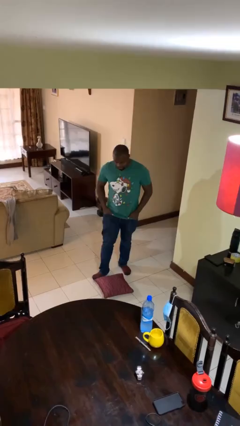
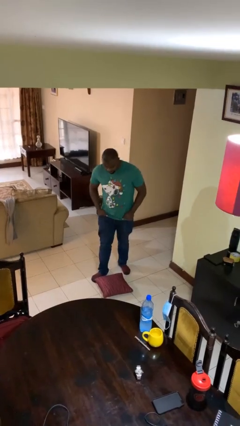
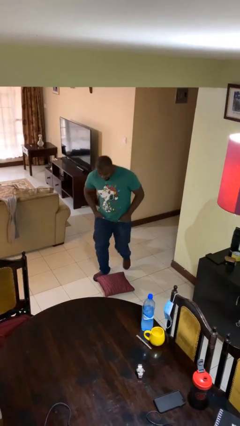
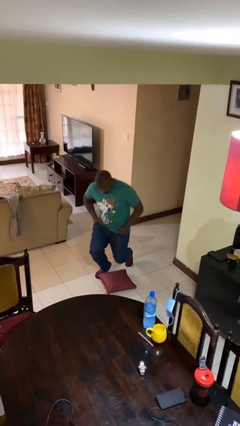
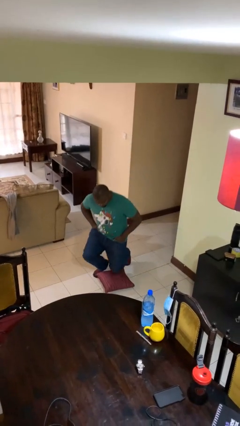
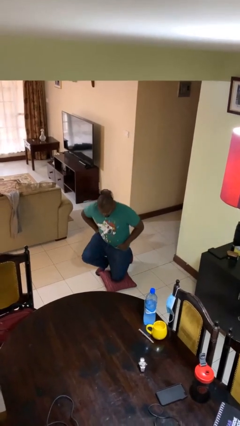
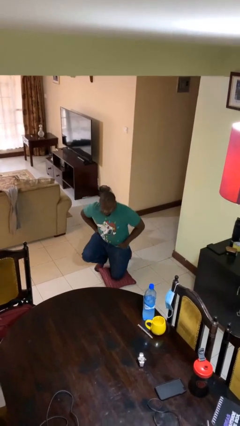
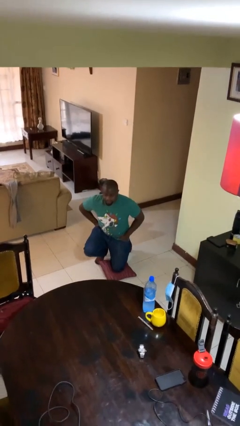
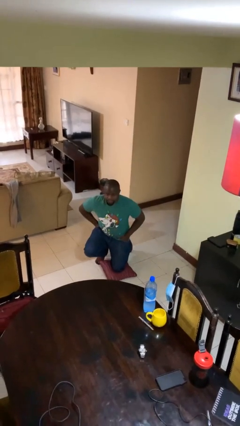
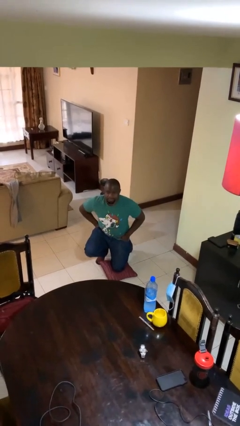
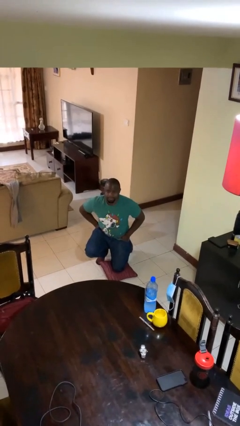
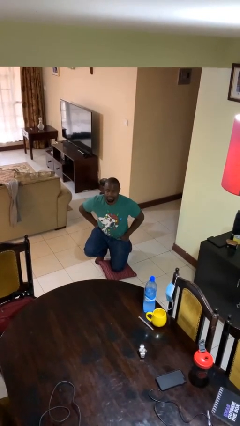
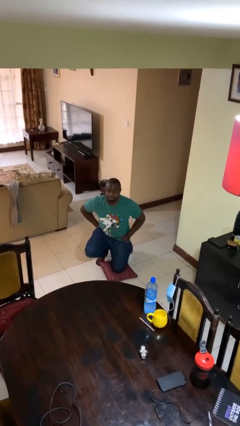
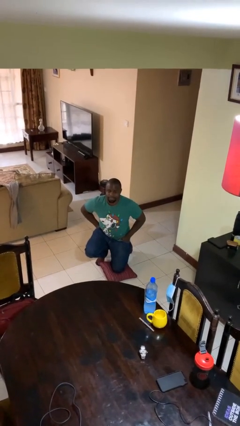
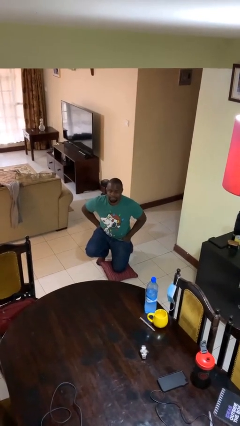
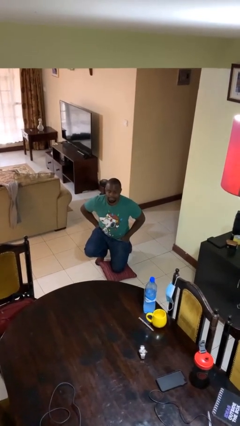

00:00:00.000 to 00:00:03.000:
person kneels

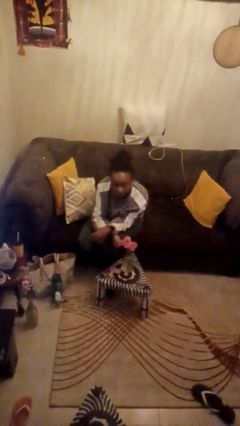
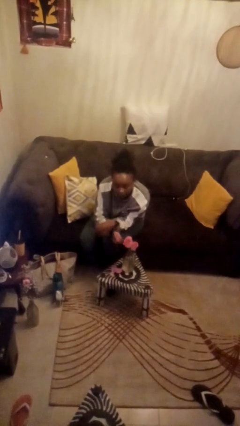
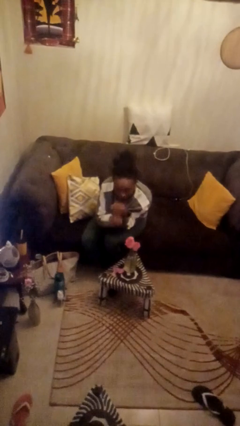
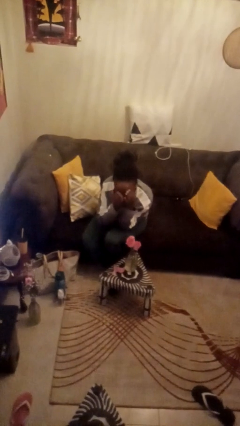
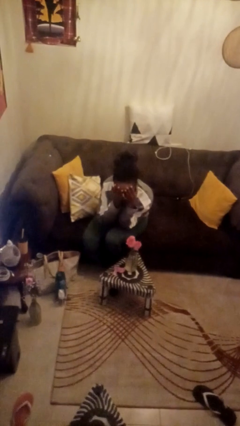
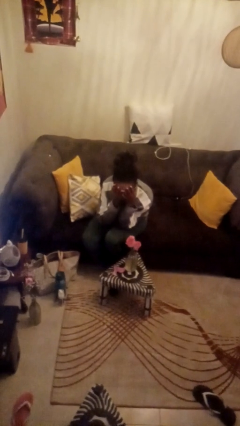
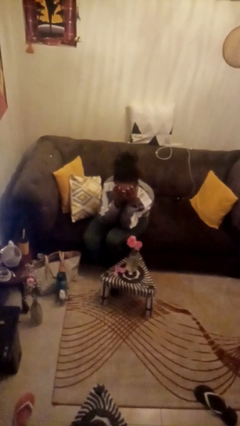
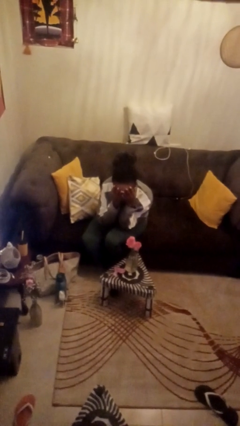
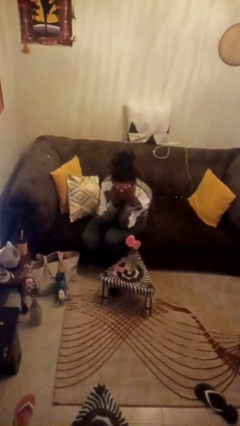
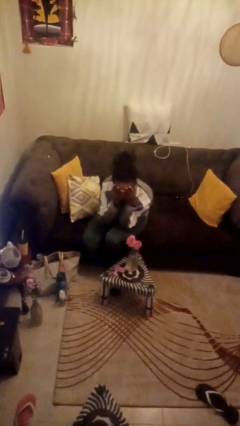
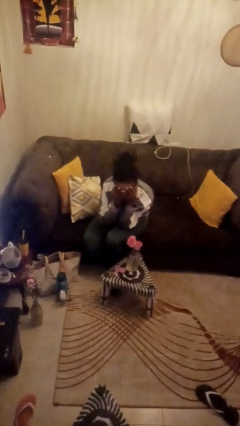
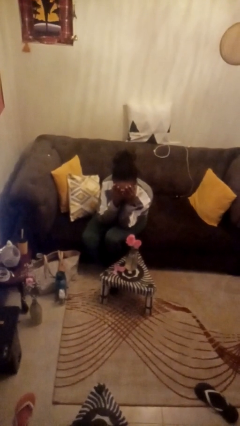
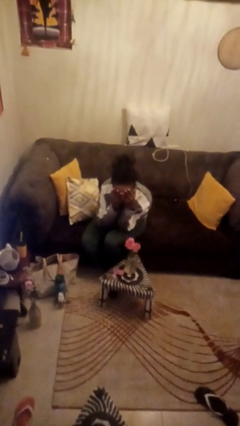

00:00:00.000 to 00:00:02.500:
person covers face with hands

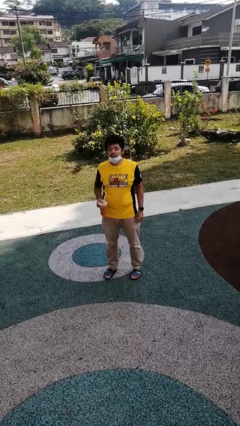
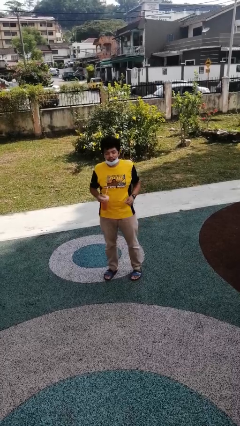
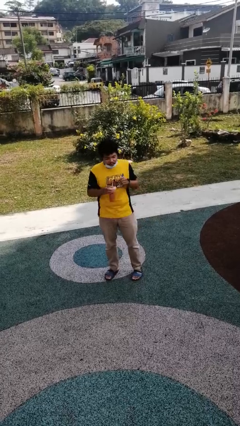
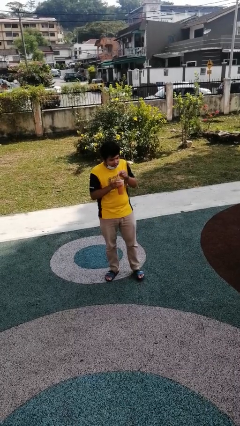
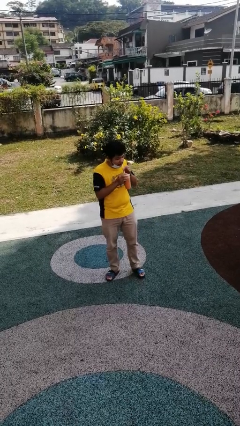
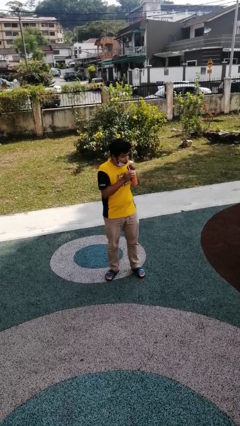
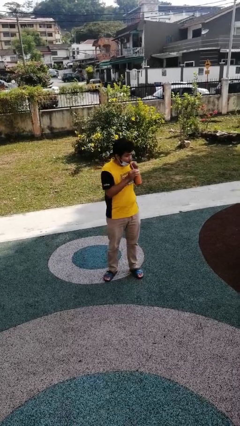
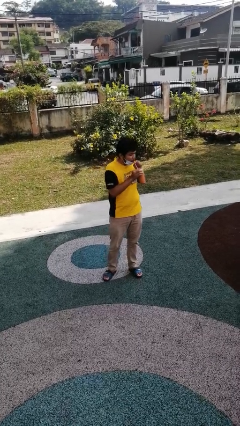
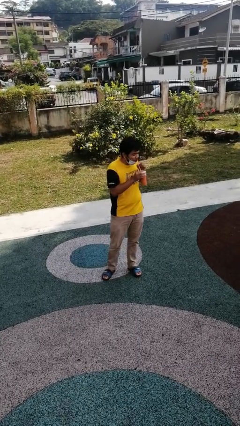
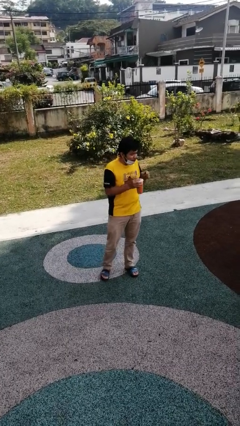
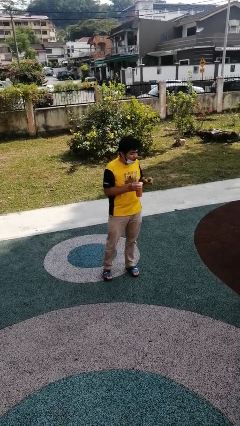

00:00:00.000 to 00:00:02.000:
person drinks from straw

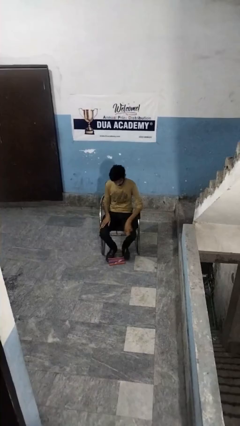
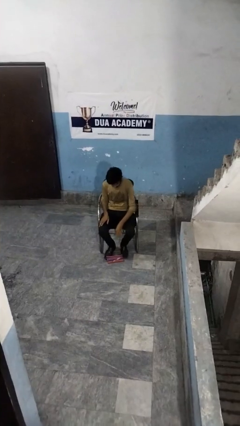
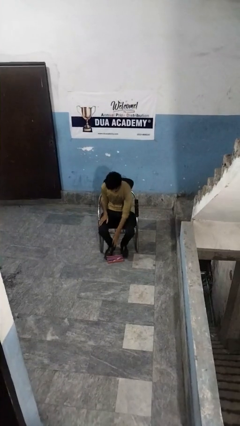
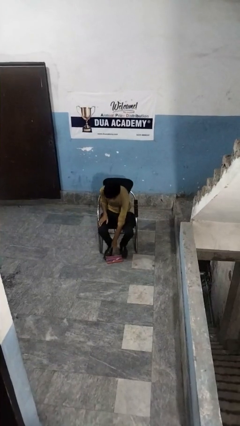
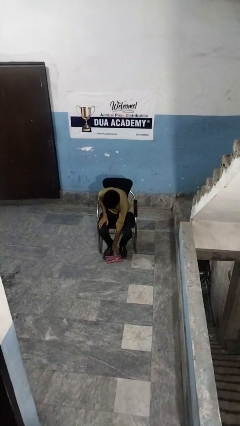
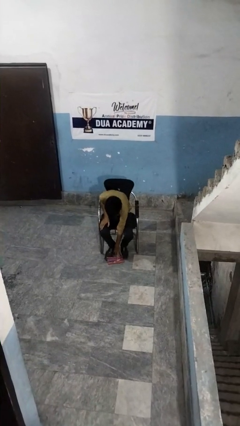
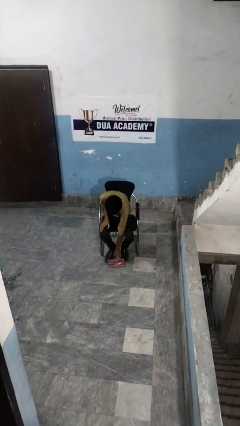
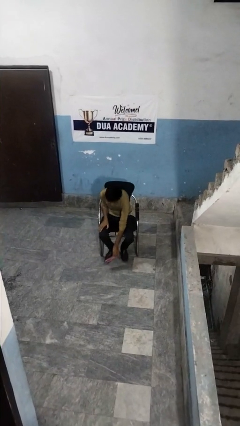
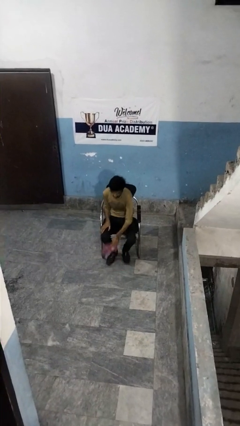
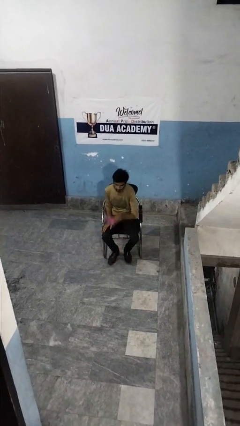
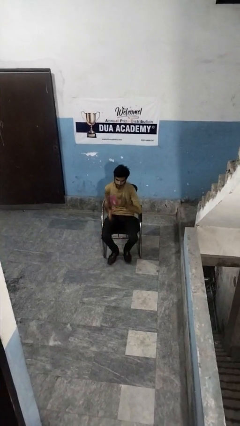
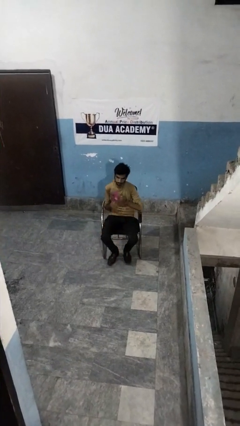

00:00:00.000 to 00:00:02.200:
person picks up object from floor

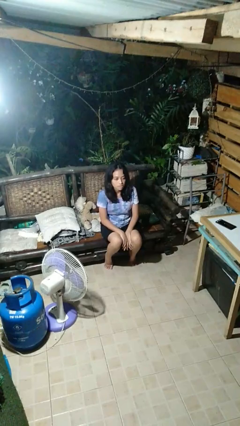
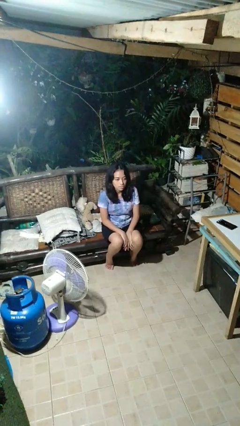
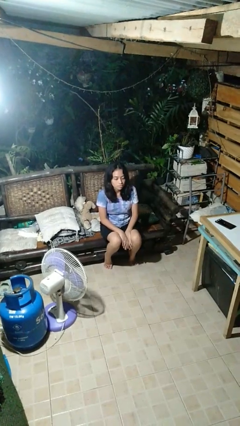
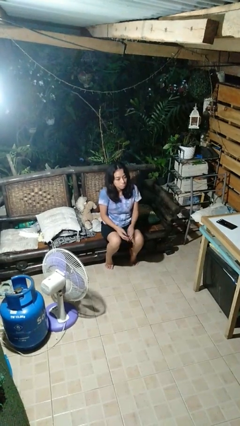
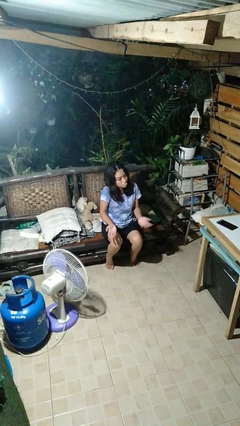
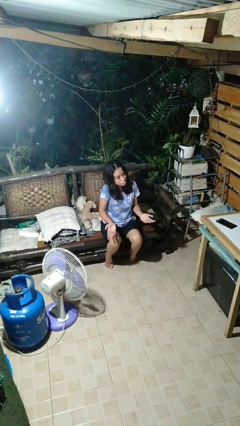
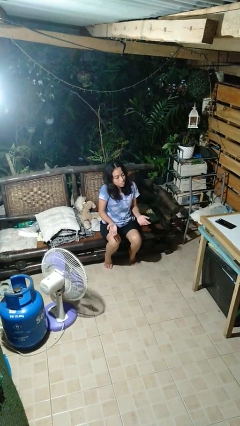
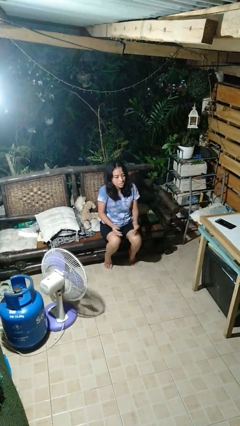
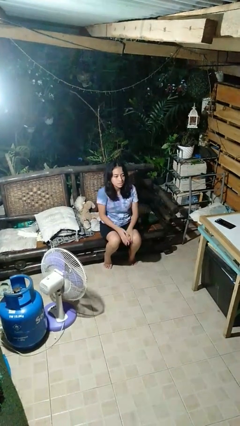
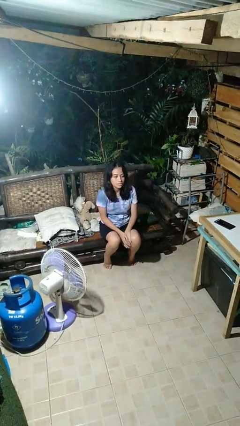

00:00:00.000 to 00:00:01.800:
person shrugs

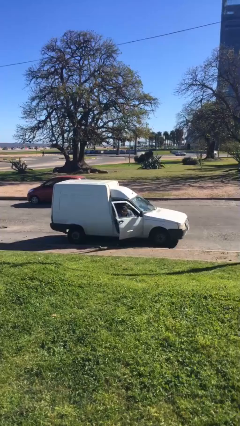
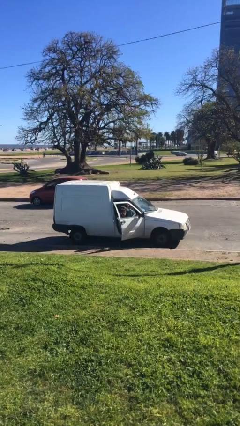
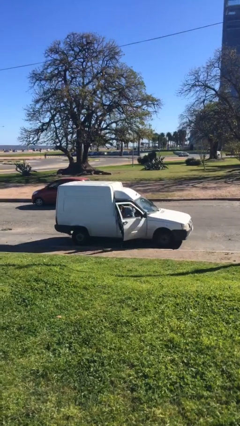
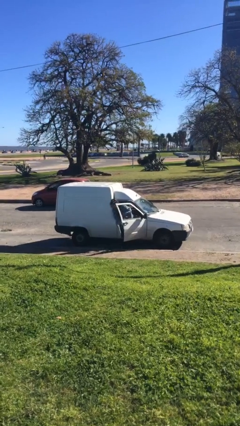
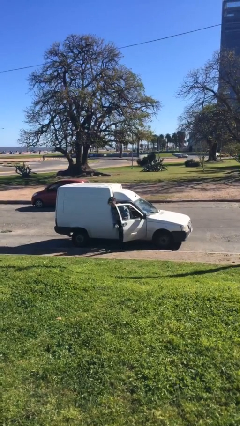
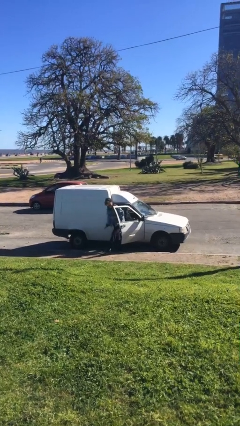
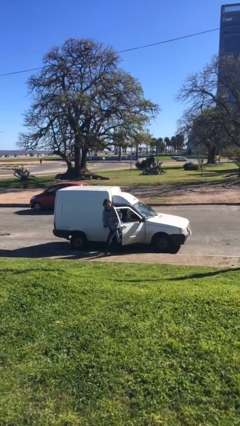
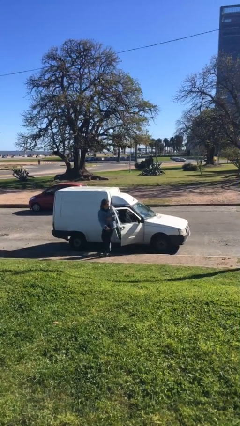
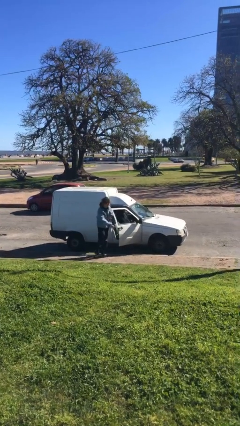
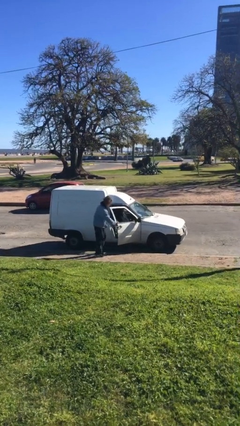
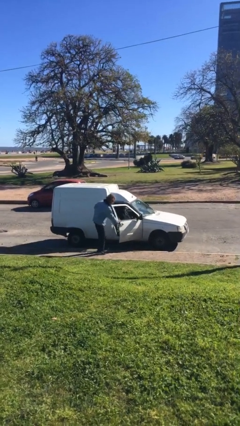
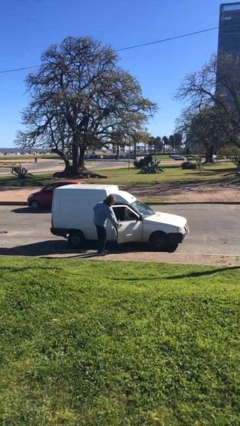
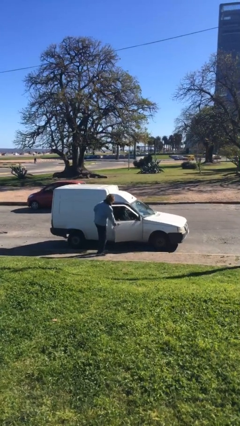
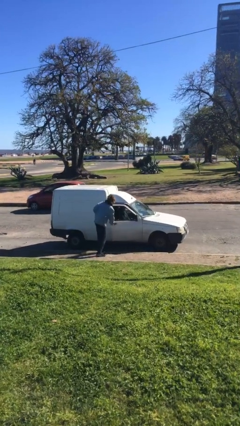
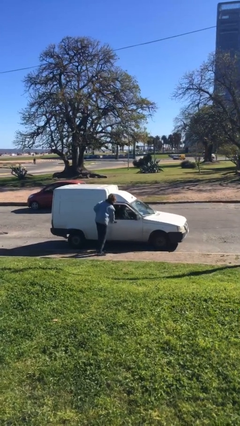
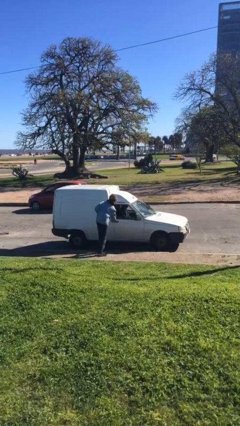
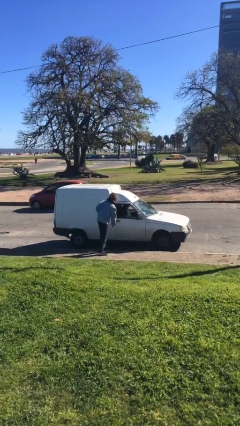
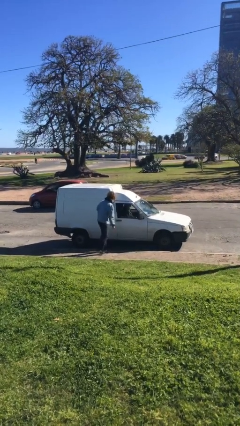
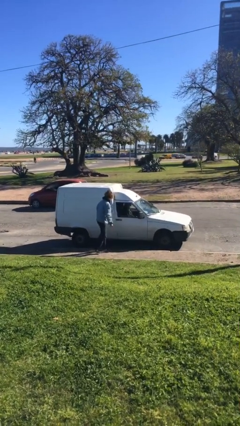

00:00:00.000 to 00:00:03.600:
car drops off person

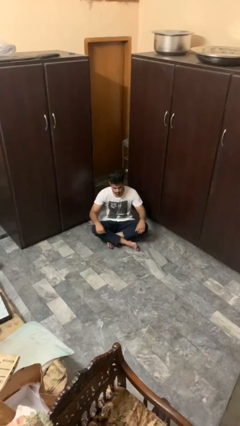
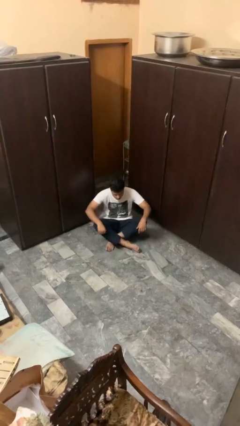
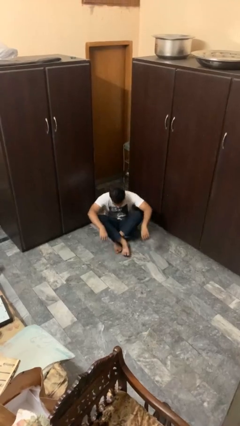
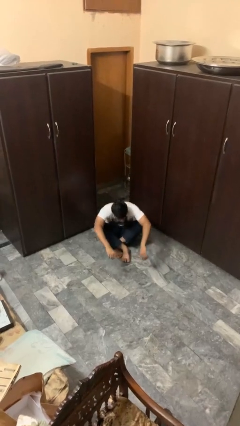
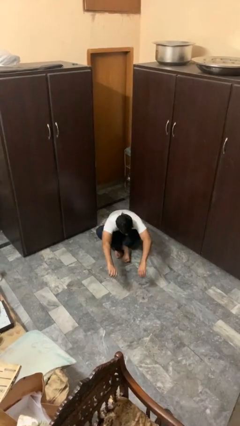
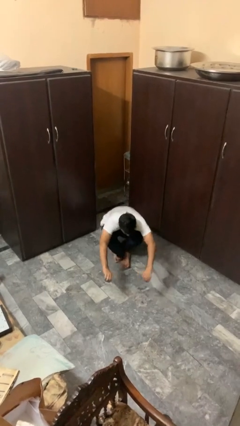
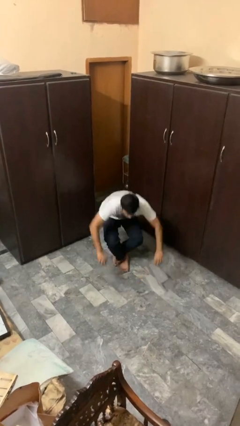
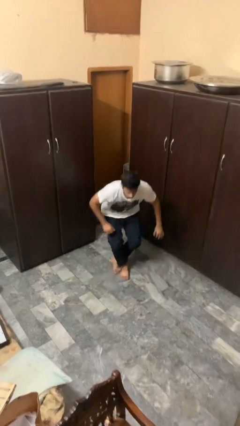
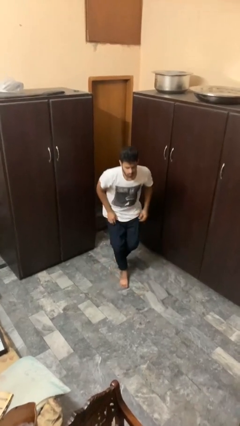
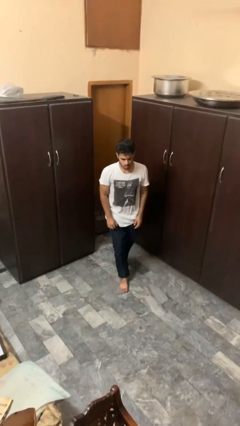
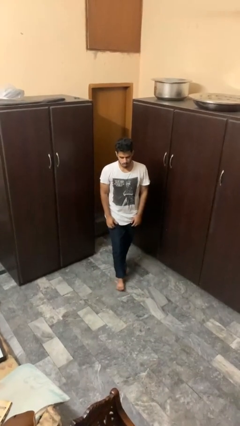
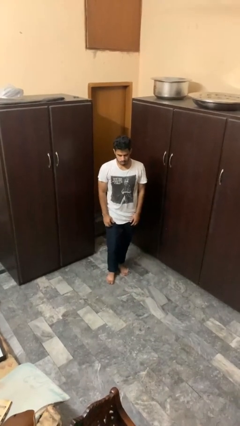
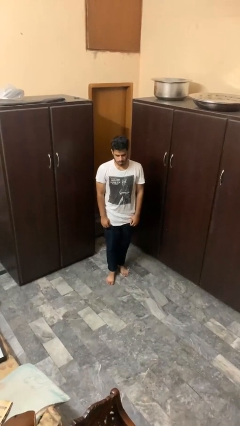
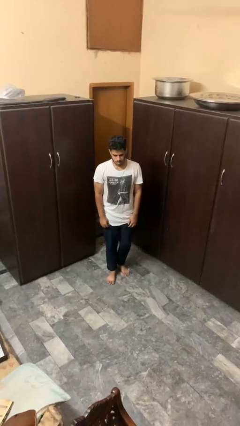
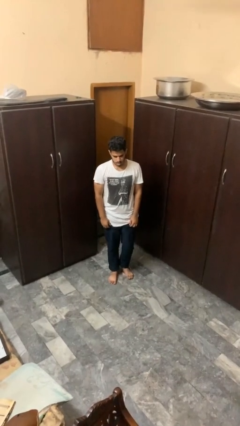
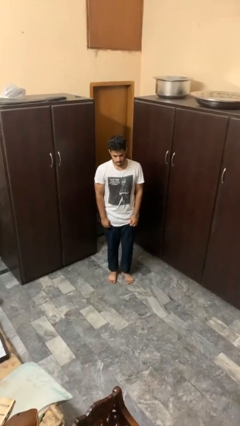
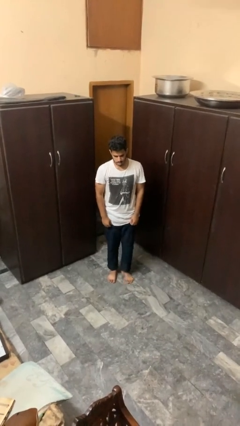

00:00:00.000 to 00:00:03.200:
person stands up from floor
